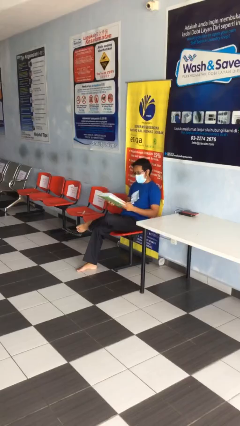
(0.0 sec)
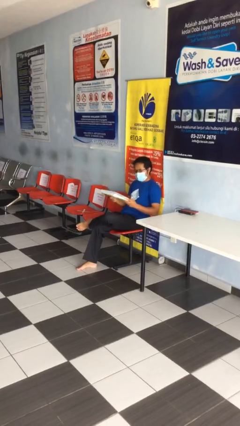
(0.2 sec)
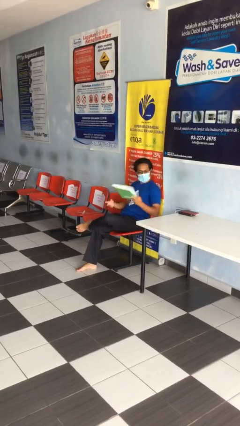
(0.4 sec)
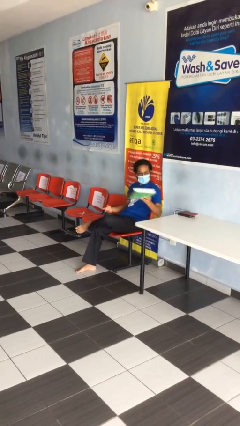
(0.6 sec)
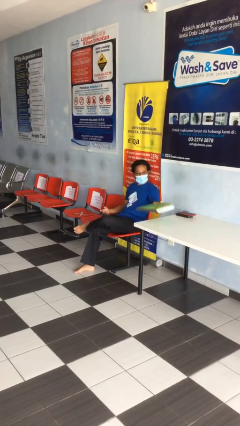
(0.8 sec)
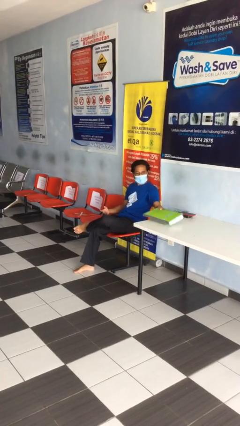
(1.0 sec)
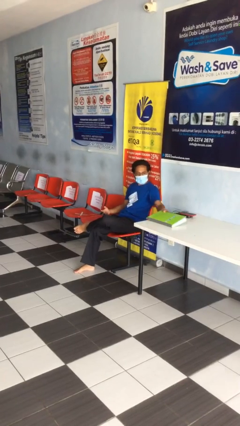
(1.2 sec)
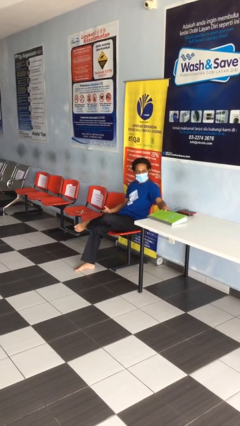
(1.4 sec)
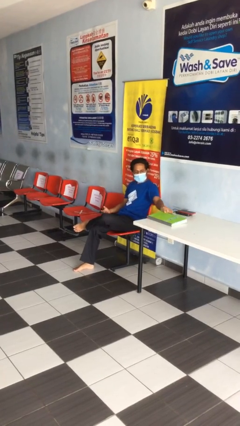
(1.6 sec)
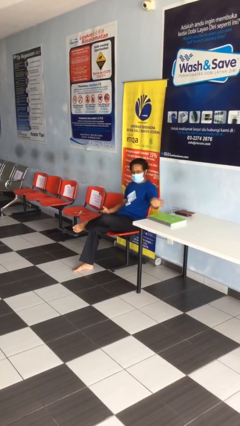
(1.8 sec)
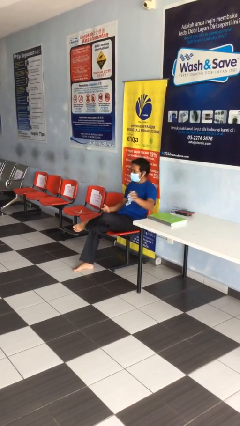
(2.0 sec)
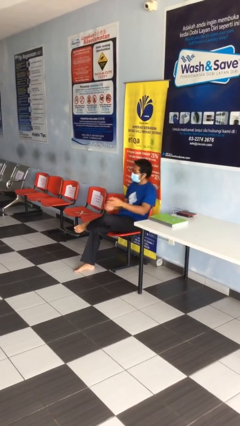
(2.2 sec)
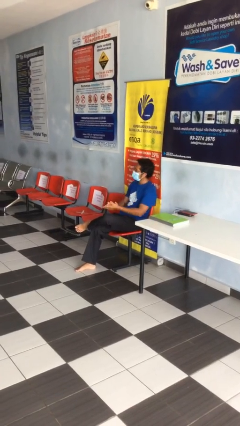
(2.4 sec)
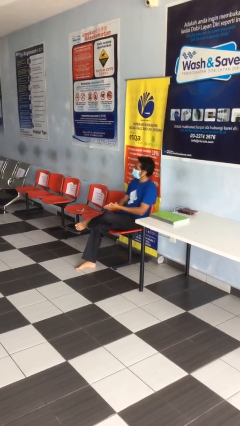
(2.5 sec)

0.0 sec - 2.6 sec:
person puts down object on table

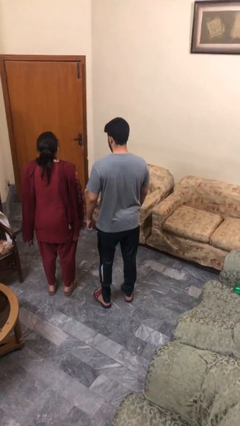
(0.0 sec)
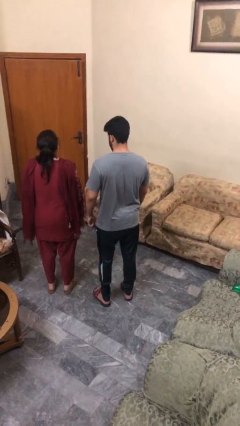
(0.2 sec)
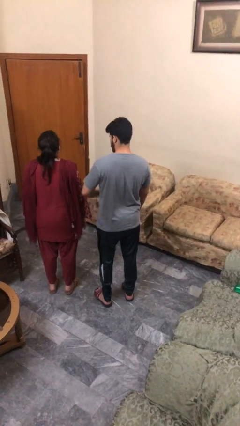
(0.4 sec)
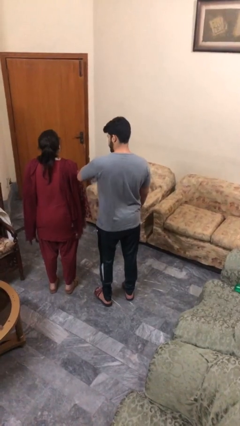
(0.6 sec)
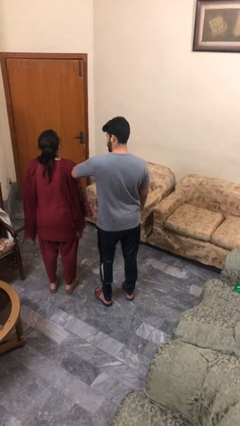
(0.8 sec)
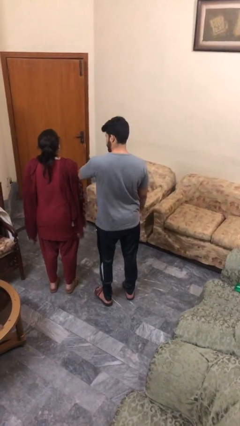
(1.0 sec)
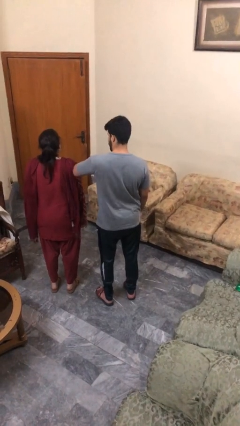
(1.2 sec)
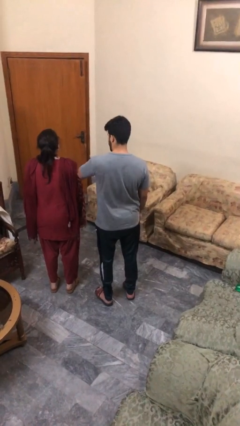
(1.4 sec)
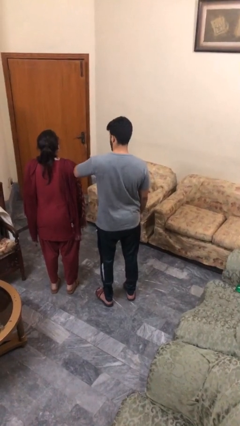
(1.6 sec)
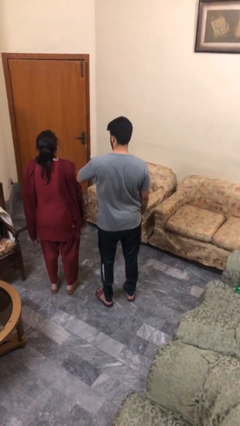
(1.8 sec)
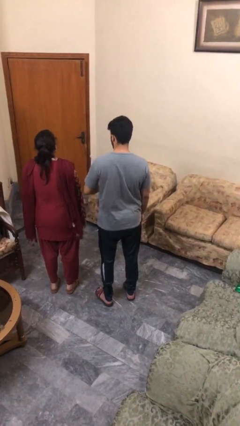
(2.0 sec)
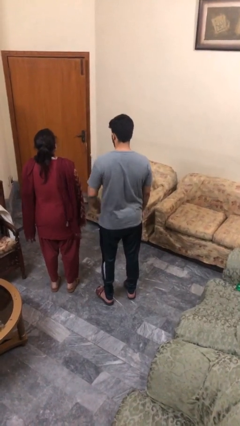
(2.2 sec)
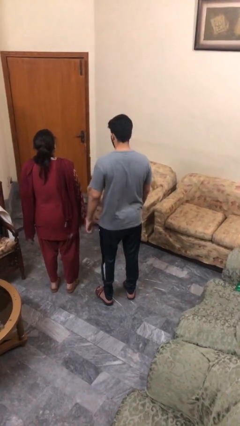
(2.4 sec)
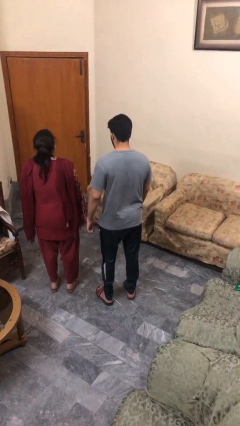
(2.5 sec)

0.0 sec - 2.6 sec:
person nudges person with elbow

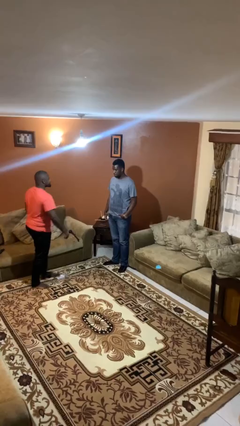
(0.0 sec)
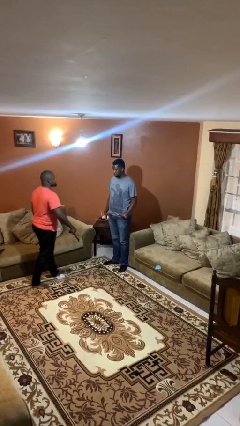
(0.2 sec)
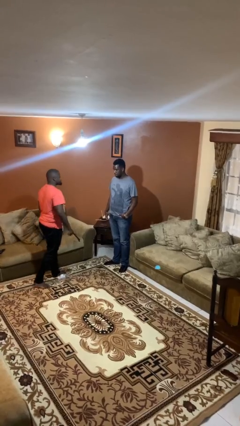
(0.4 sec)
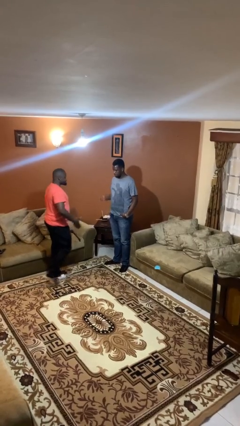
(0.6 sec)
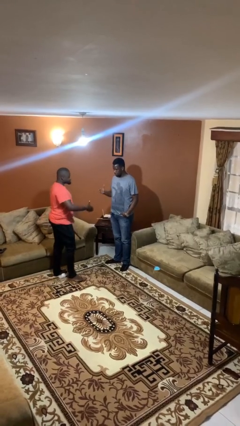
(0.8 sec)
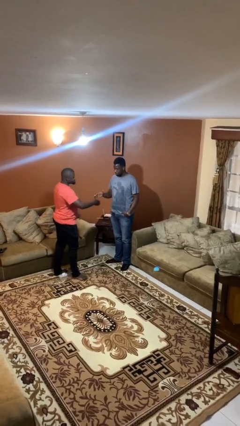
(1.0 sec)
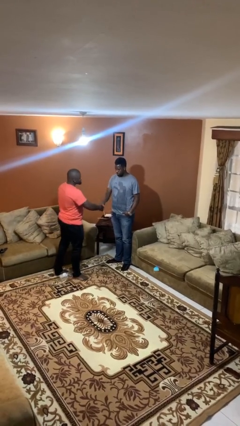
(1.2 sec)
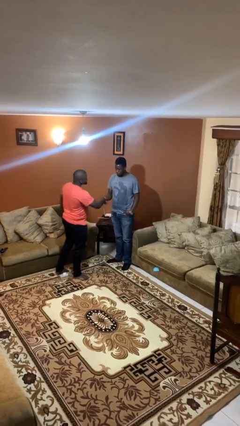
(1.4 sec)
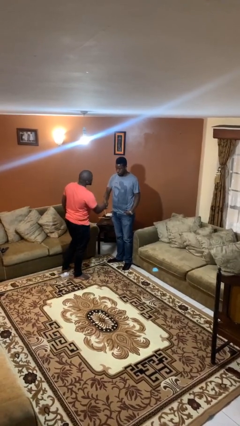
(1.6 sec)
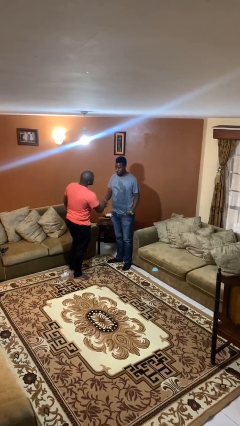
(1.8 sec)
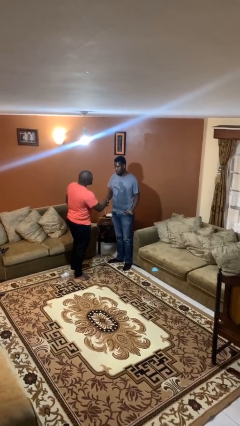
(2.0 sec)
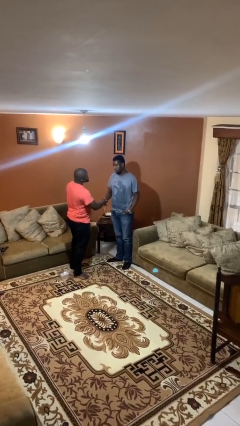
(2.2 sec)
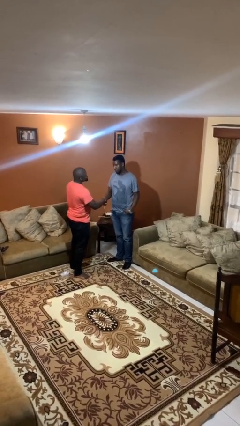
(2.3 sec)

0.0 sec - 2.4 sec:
person shakes hand

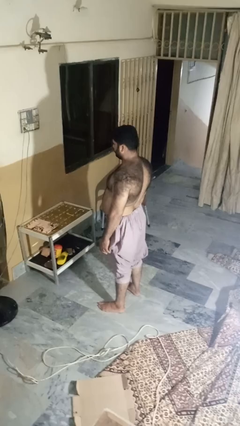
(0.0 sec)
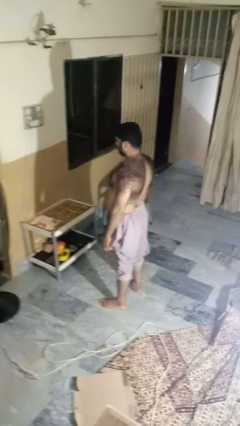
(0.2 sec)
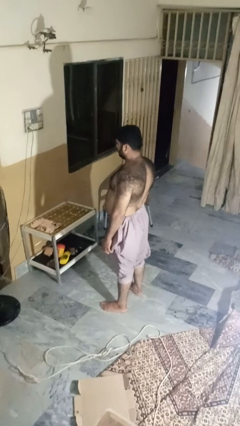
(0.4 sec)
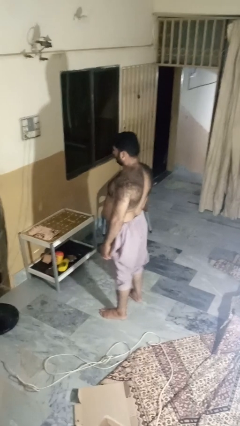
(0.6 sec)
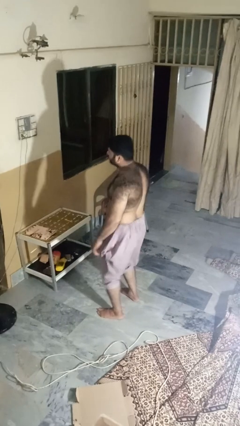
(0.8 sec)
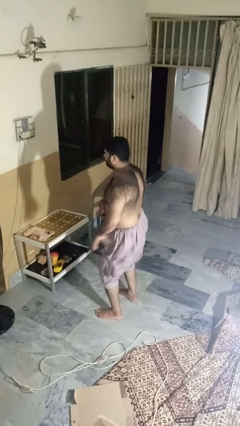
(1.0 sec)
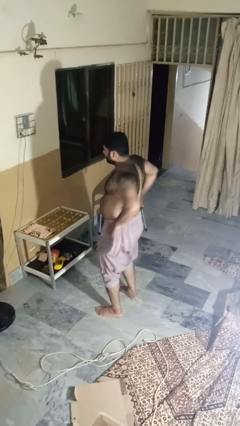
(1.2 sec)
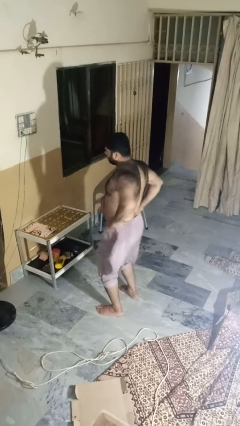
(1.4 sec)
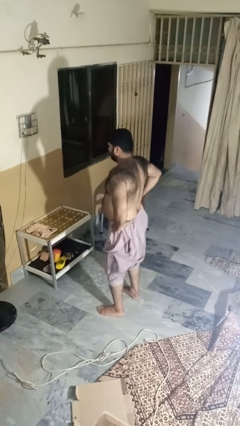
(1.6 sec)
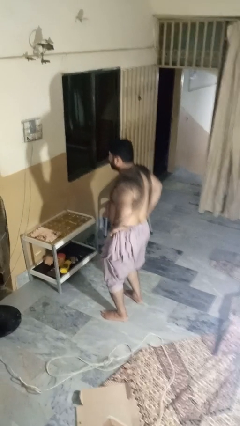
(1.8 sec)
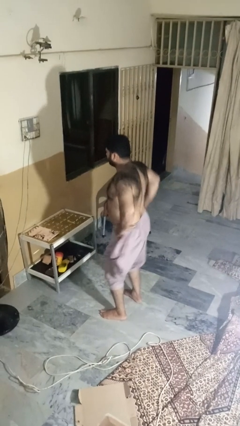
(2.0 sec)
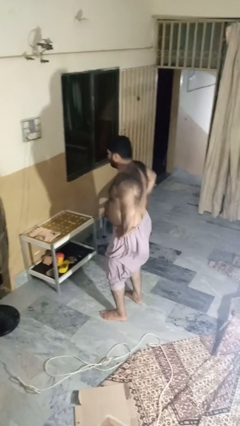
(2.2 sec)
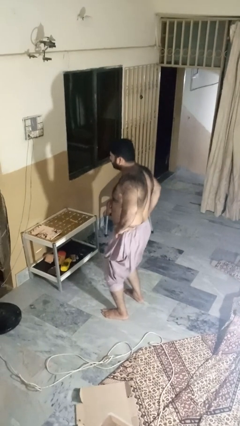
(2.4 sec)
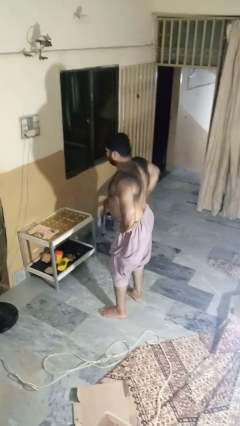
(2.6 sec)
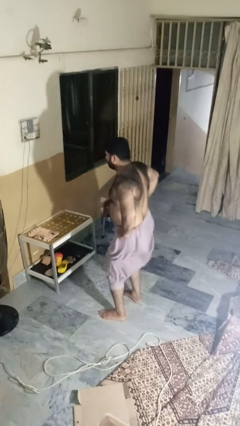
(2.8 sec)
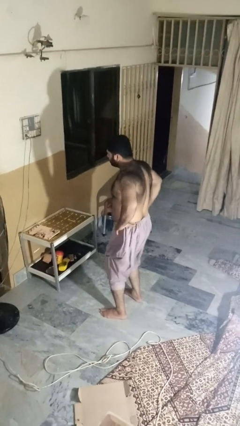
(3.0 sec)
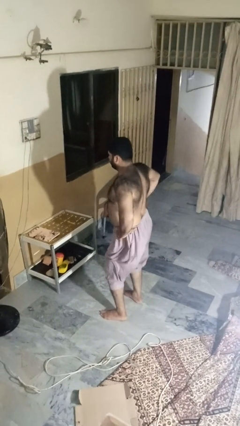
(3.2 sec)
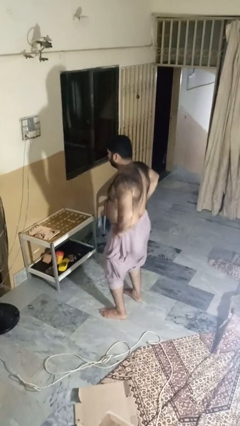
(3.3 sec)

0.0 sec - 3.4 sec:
person dances in place

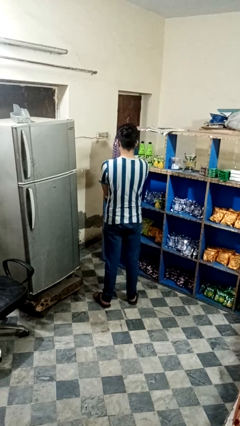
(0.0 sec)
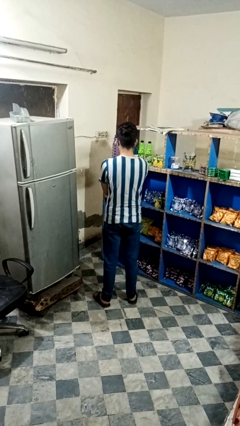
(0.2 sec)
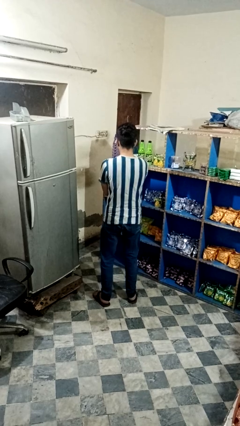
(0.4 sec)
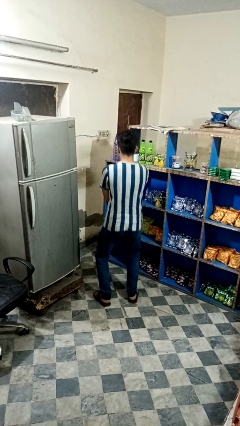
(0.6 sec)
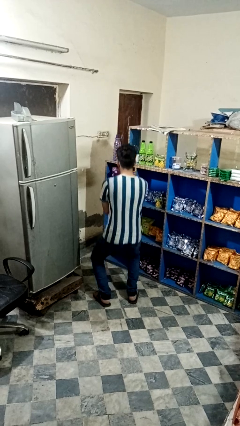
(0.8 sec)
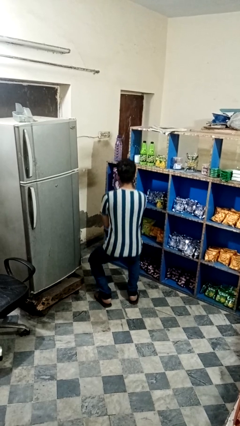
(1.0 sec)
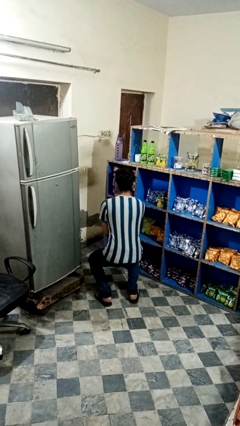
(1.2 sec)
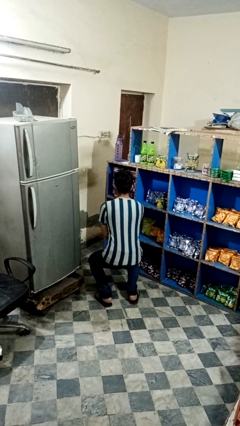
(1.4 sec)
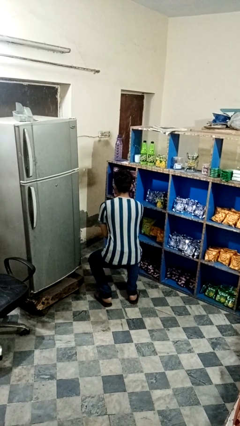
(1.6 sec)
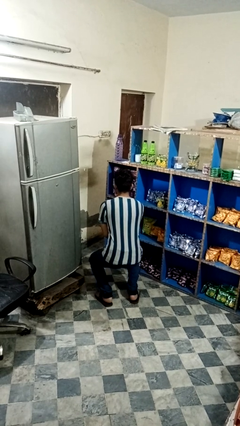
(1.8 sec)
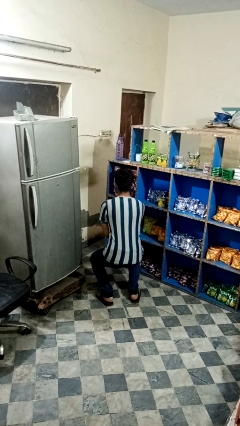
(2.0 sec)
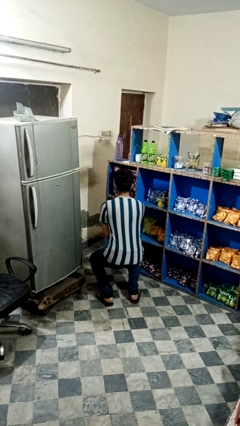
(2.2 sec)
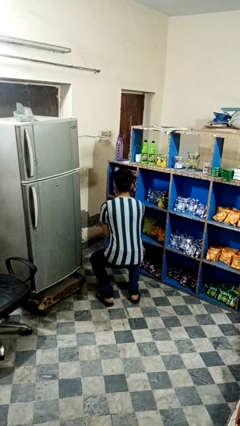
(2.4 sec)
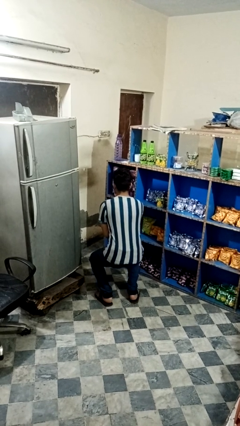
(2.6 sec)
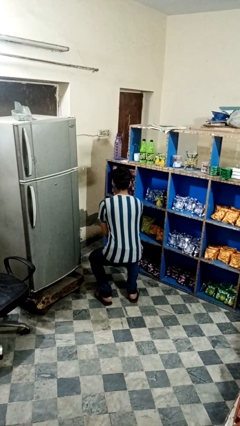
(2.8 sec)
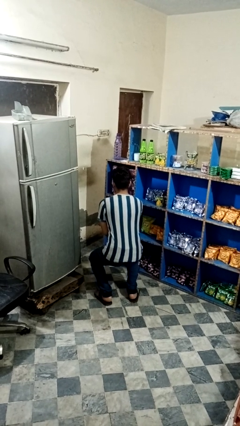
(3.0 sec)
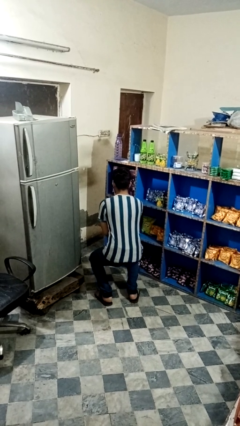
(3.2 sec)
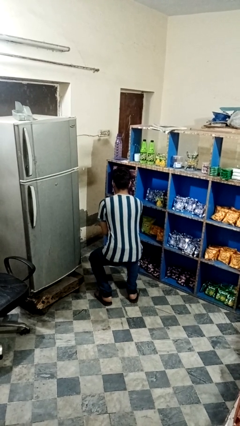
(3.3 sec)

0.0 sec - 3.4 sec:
person squats

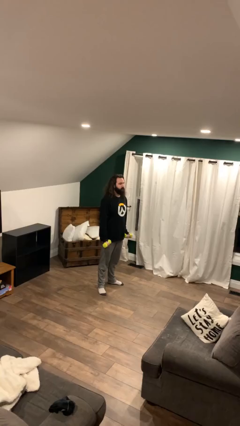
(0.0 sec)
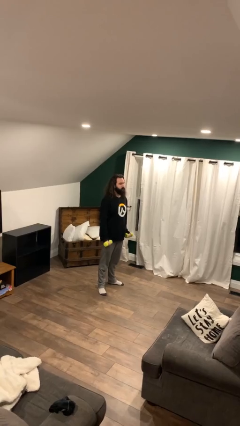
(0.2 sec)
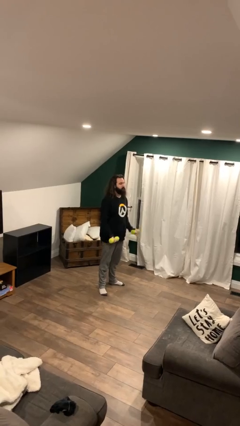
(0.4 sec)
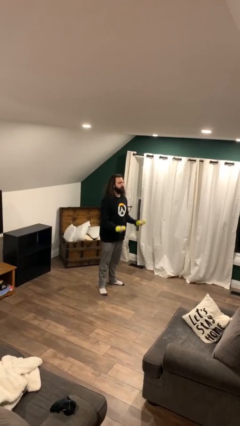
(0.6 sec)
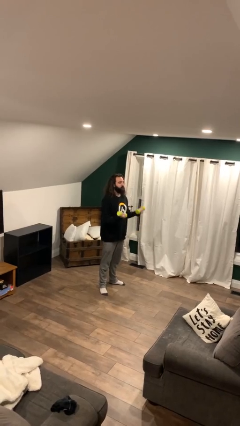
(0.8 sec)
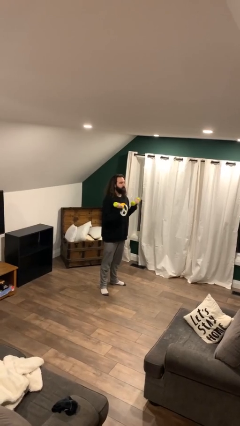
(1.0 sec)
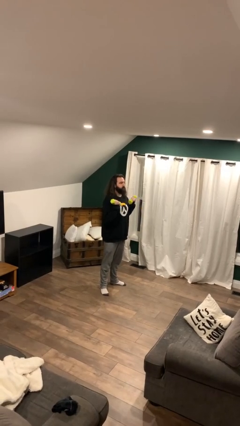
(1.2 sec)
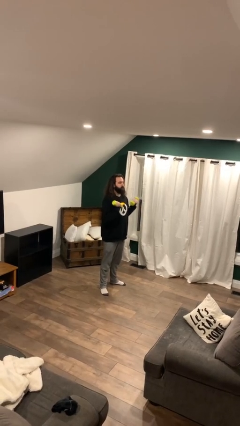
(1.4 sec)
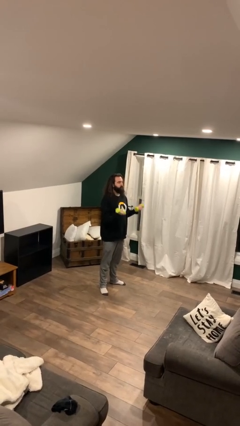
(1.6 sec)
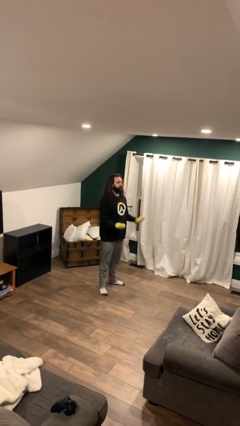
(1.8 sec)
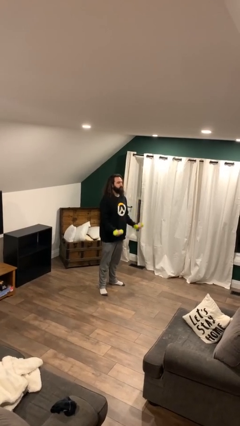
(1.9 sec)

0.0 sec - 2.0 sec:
person lifts dumbbells

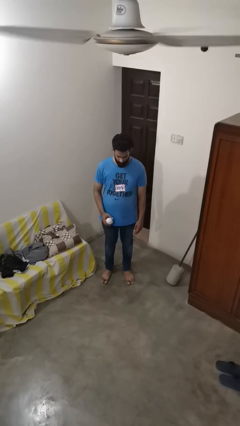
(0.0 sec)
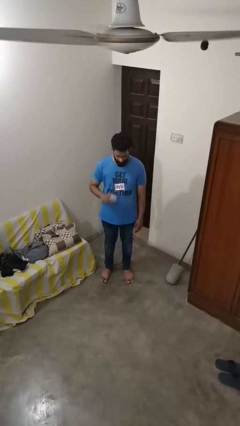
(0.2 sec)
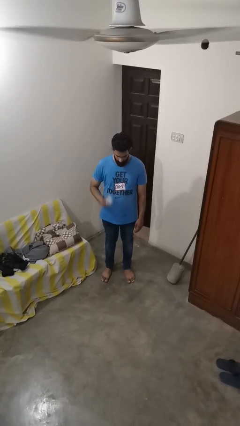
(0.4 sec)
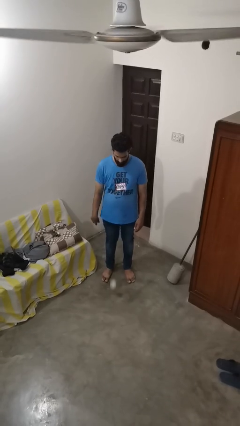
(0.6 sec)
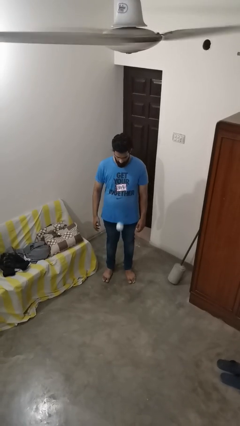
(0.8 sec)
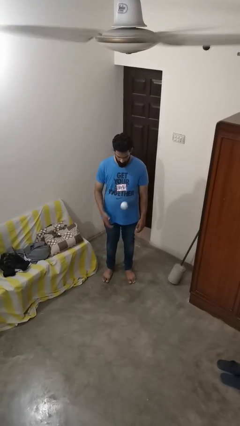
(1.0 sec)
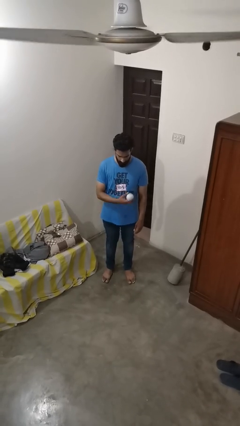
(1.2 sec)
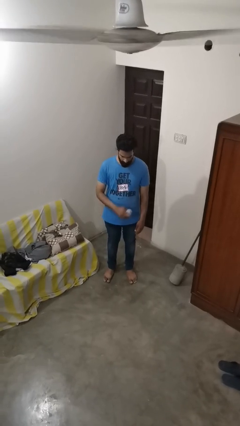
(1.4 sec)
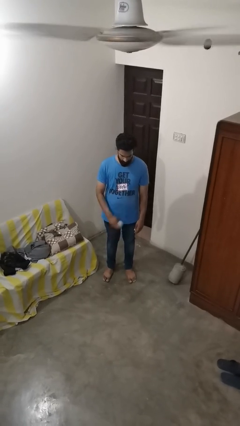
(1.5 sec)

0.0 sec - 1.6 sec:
person bounces ball on floor
